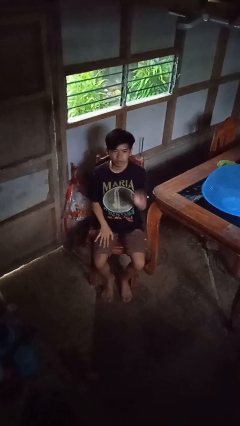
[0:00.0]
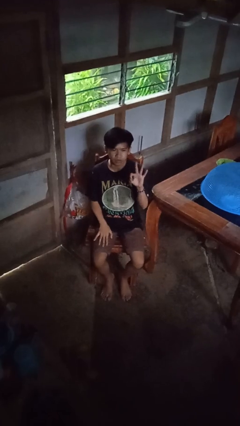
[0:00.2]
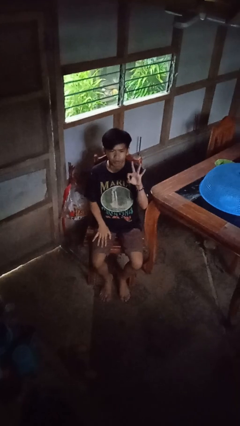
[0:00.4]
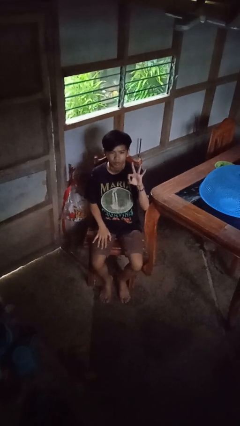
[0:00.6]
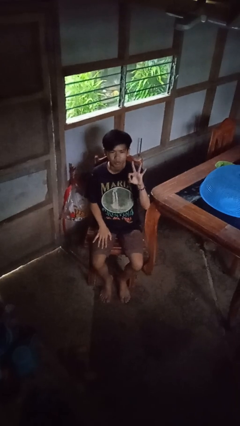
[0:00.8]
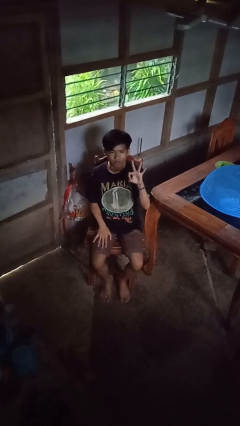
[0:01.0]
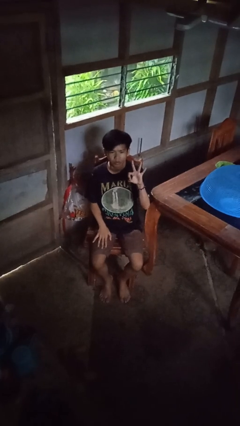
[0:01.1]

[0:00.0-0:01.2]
person gestures number three

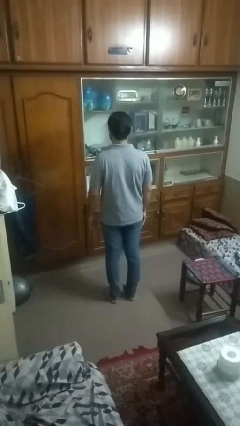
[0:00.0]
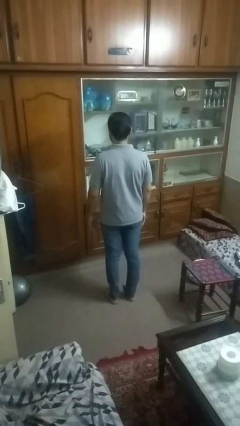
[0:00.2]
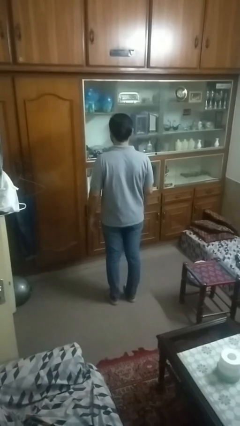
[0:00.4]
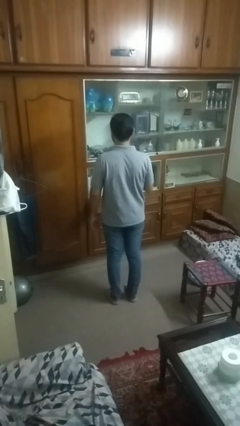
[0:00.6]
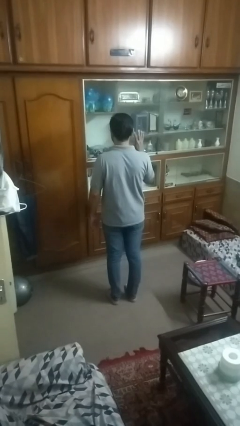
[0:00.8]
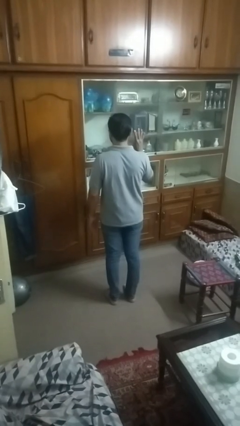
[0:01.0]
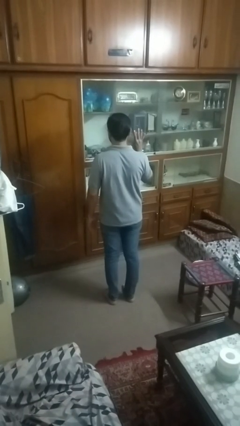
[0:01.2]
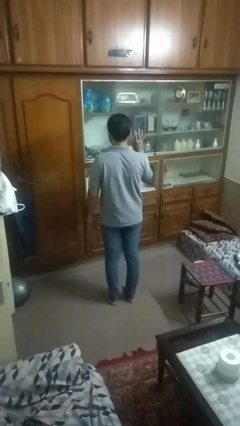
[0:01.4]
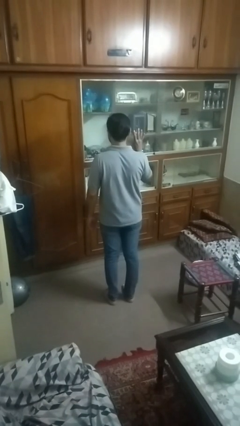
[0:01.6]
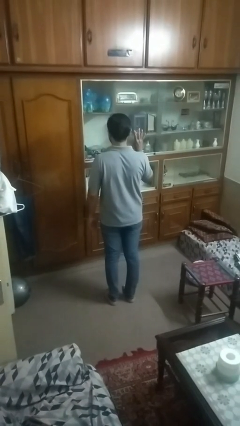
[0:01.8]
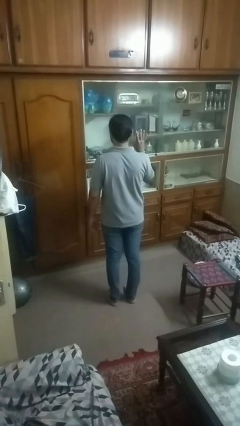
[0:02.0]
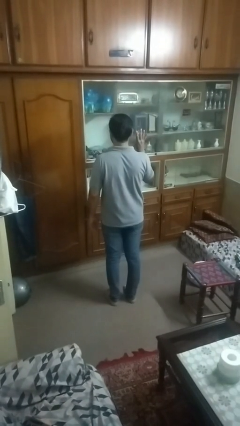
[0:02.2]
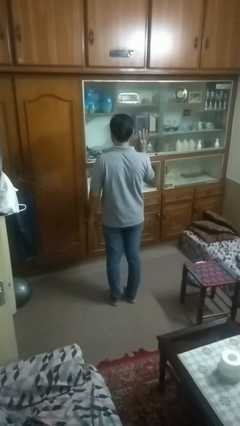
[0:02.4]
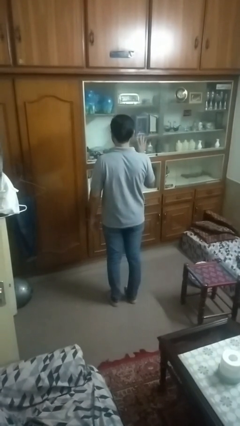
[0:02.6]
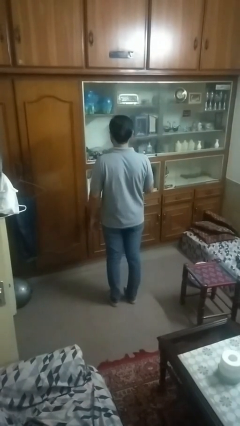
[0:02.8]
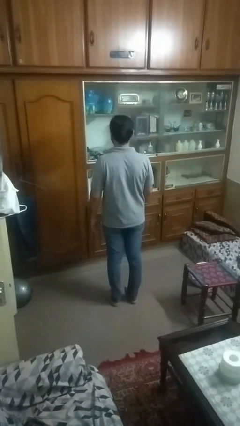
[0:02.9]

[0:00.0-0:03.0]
person gestures number four

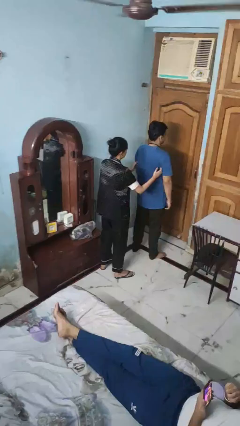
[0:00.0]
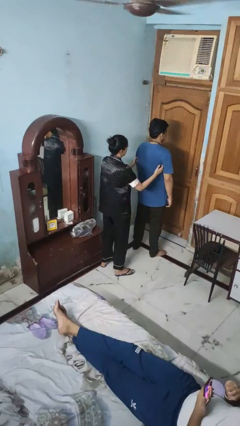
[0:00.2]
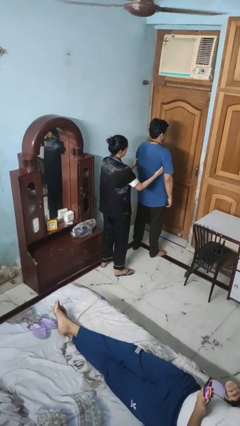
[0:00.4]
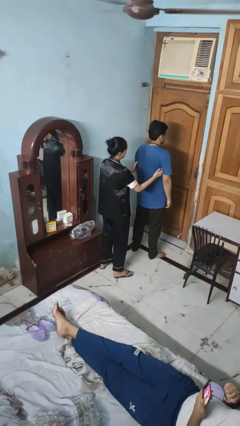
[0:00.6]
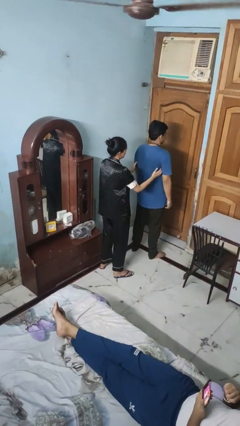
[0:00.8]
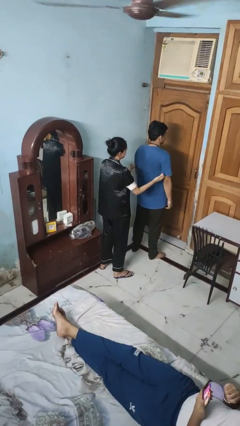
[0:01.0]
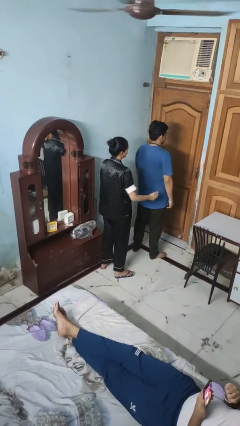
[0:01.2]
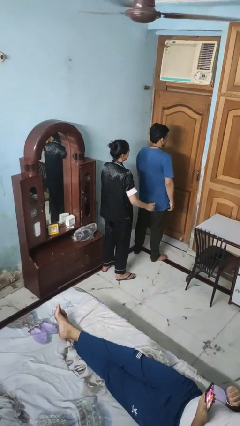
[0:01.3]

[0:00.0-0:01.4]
person tickles person

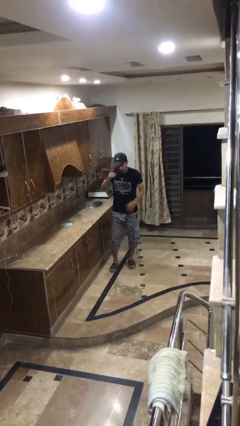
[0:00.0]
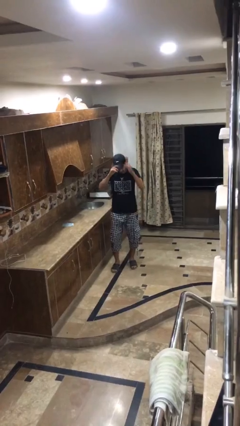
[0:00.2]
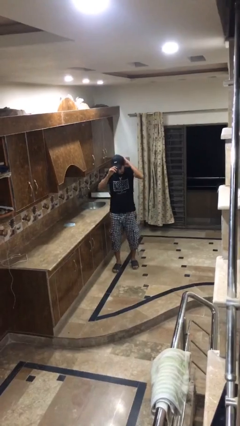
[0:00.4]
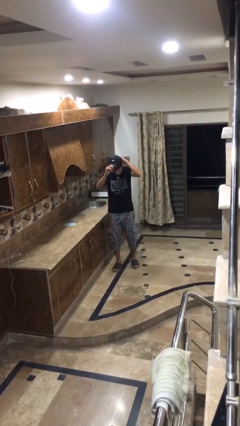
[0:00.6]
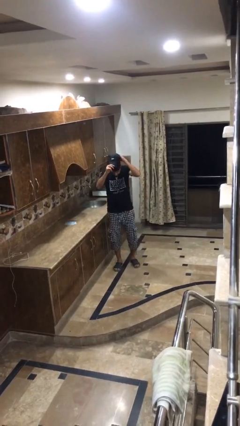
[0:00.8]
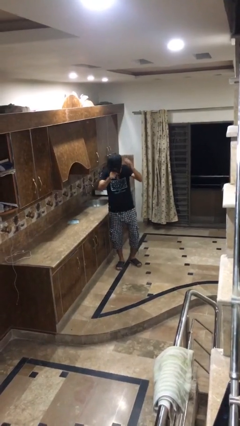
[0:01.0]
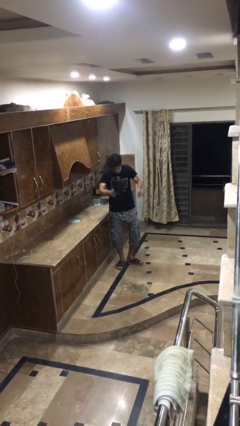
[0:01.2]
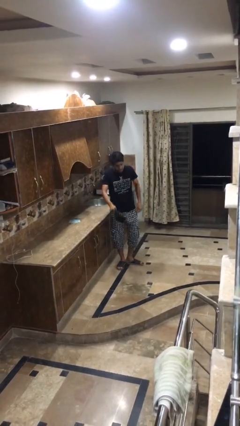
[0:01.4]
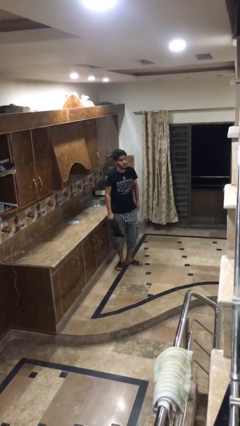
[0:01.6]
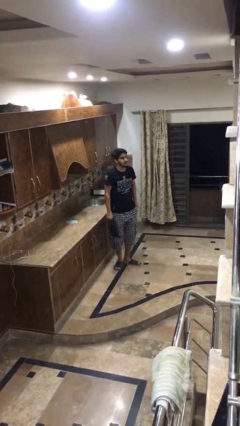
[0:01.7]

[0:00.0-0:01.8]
person takes off hat

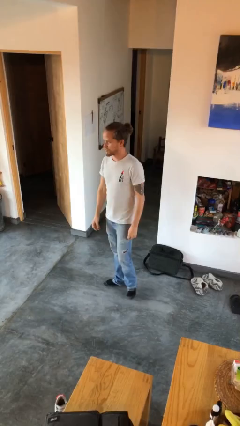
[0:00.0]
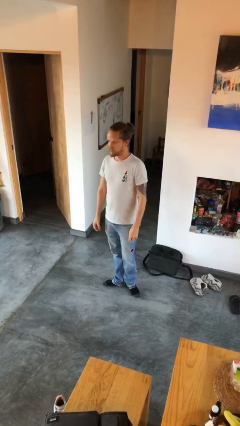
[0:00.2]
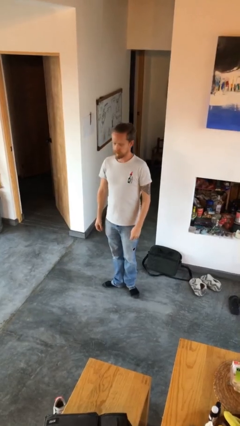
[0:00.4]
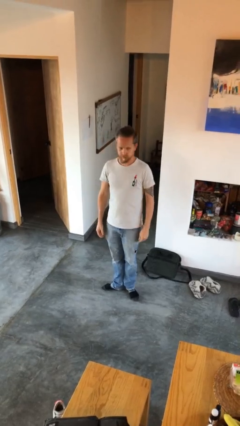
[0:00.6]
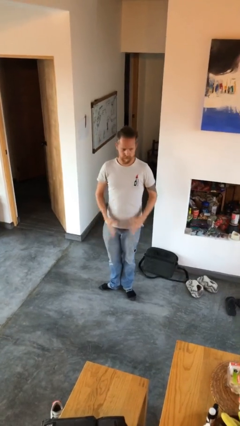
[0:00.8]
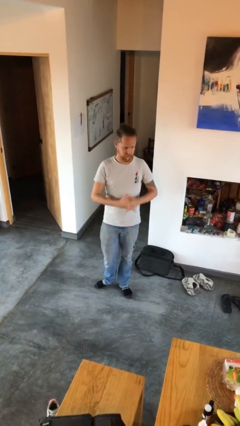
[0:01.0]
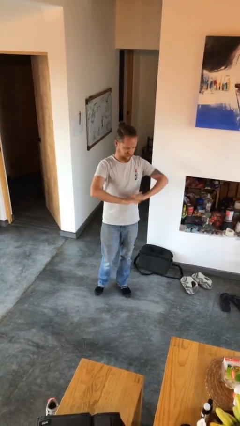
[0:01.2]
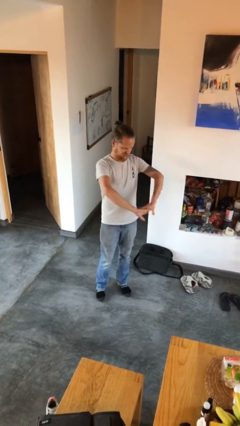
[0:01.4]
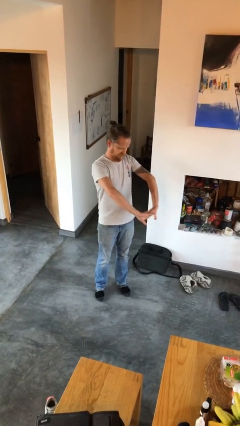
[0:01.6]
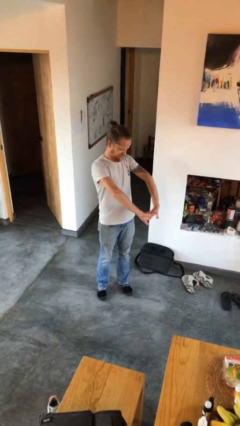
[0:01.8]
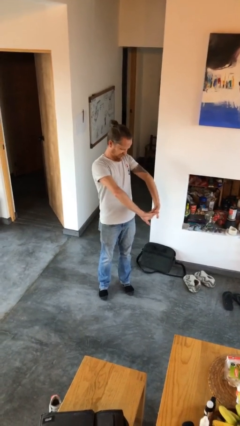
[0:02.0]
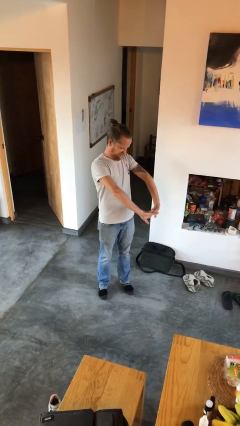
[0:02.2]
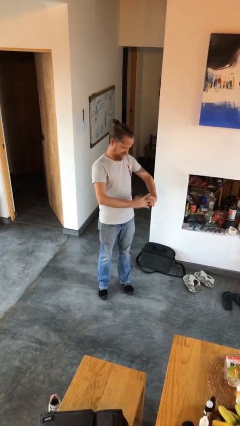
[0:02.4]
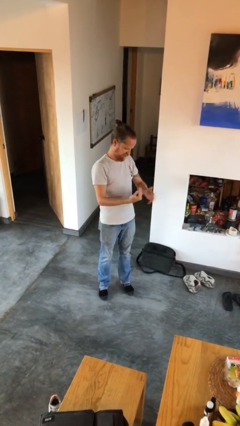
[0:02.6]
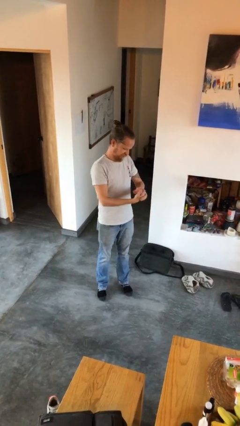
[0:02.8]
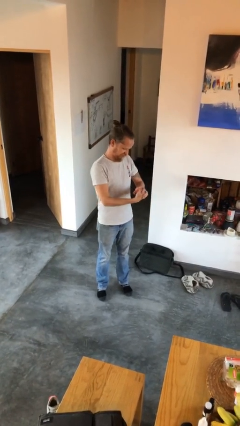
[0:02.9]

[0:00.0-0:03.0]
person cracks knuckles

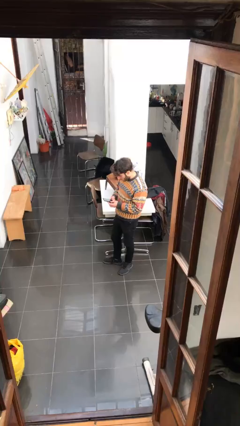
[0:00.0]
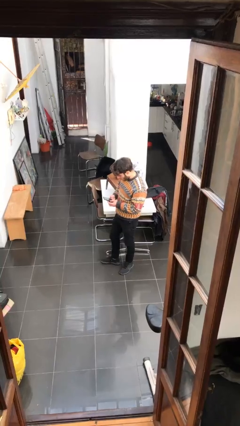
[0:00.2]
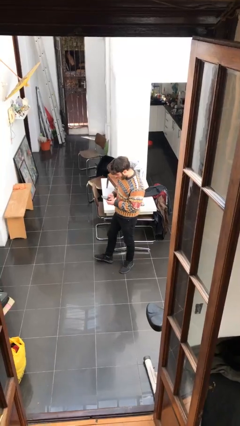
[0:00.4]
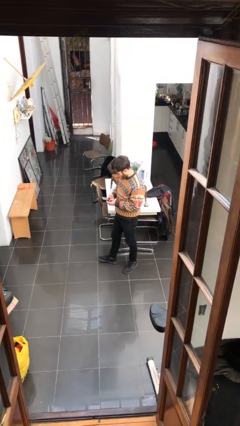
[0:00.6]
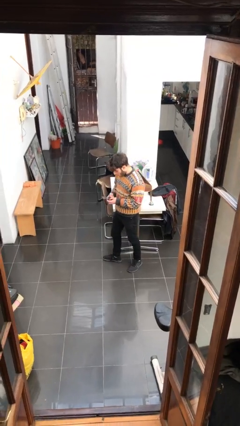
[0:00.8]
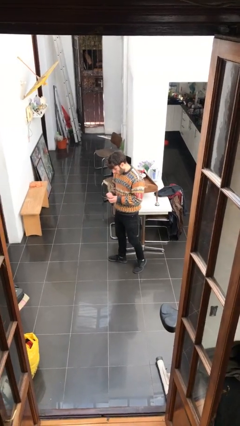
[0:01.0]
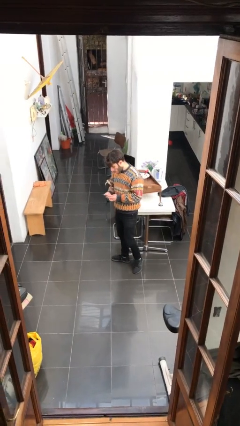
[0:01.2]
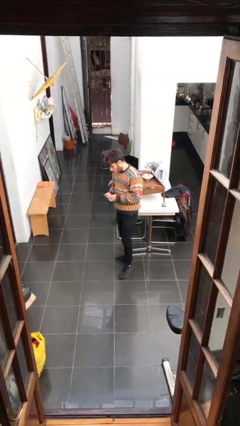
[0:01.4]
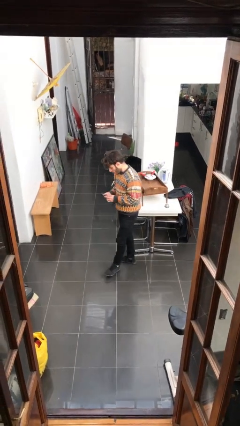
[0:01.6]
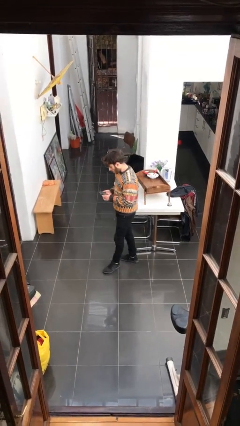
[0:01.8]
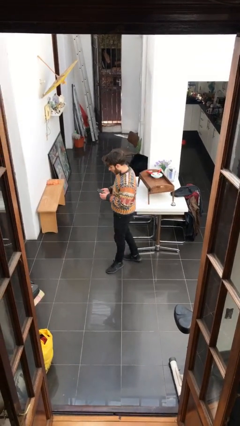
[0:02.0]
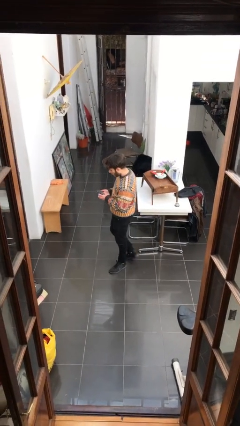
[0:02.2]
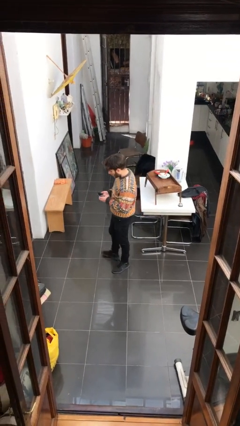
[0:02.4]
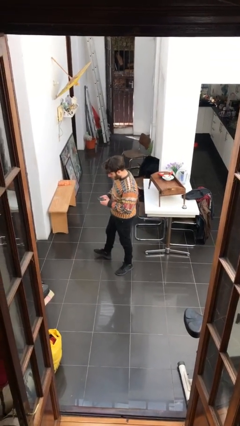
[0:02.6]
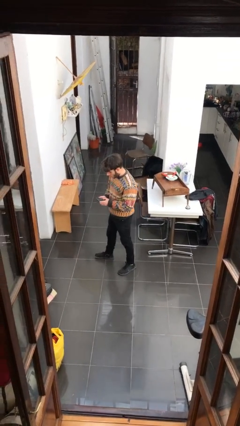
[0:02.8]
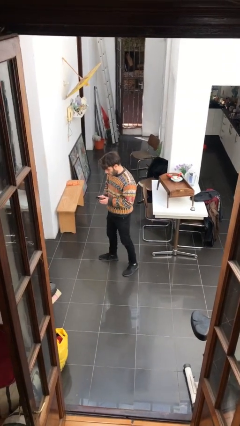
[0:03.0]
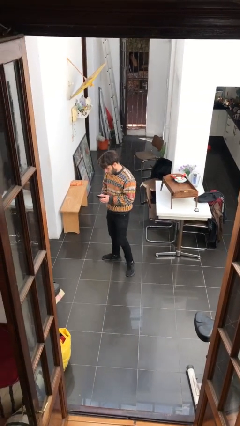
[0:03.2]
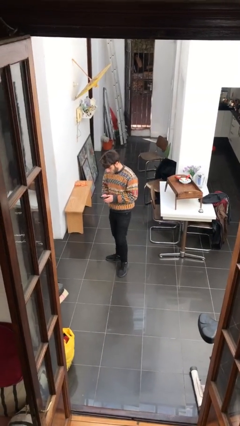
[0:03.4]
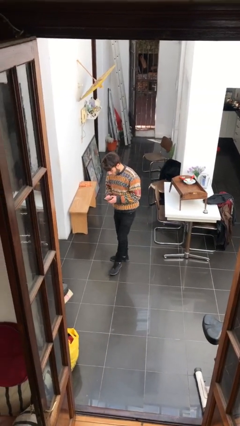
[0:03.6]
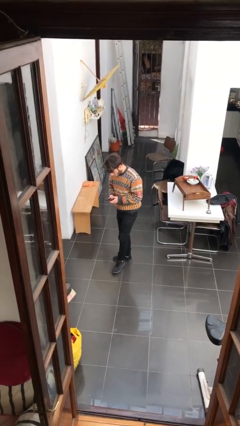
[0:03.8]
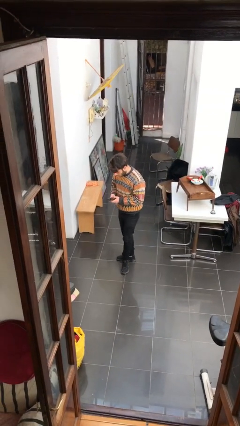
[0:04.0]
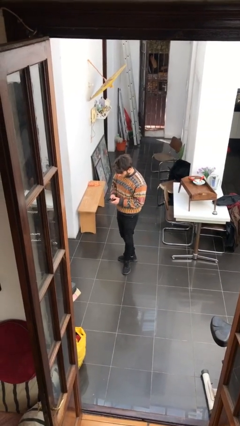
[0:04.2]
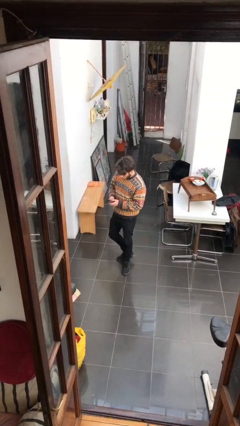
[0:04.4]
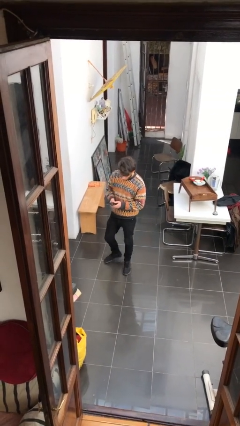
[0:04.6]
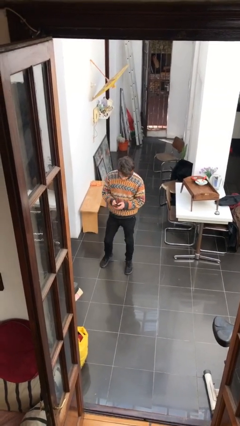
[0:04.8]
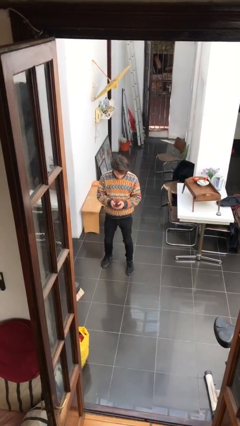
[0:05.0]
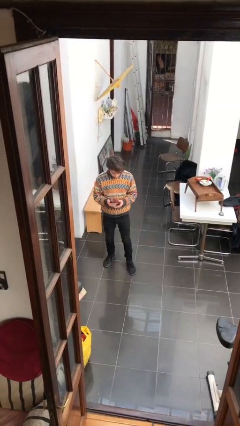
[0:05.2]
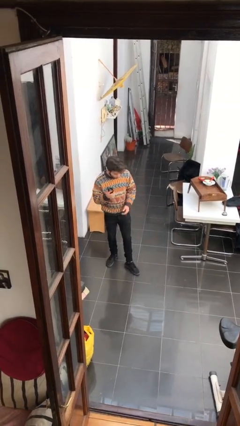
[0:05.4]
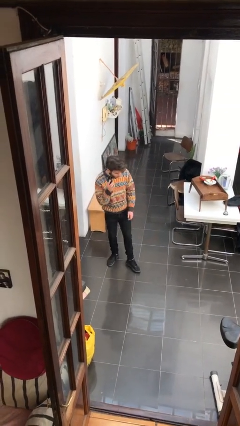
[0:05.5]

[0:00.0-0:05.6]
person texts on phone

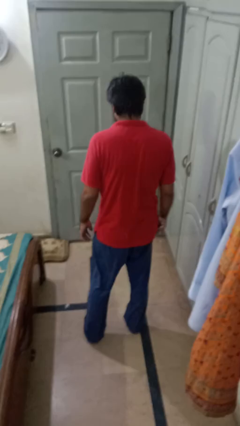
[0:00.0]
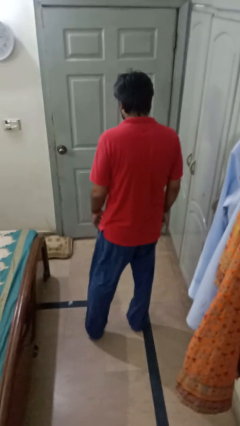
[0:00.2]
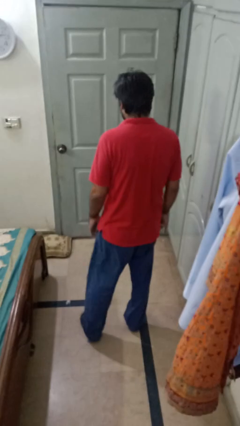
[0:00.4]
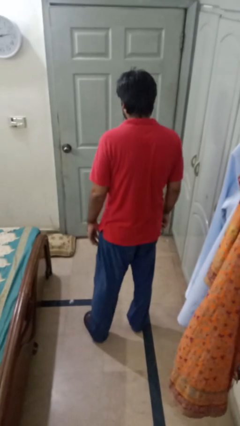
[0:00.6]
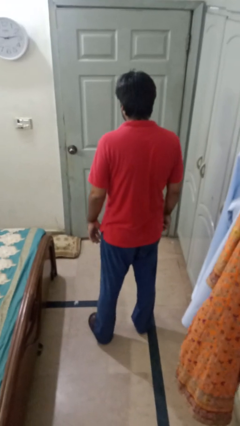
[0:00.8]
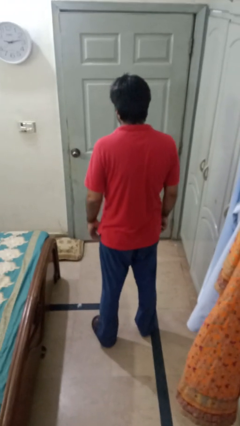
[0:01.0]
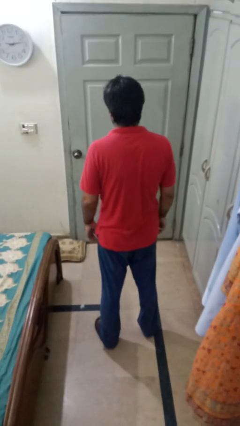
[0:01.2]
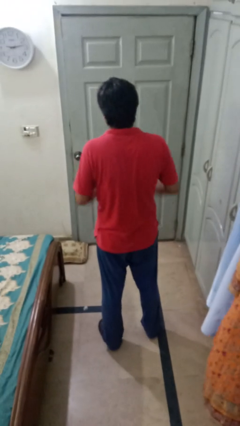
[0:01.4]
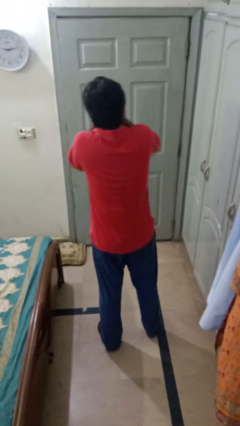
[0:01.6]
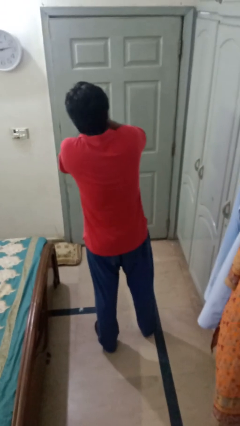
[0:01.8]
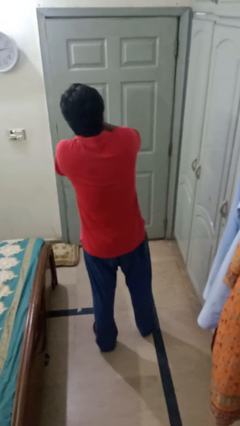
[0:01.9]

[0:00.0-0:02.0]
person covers face with hands
